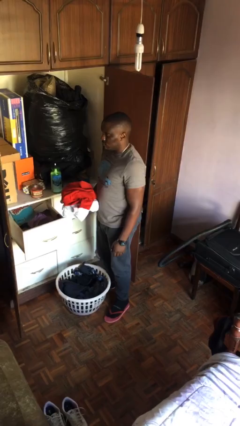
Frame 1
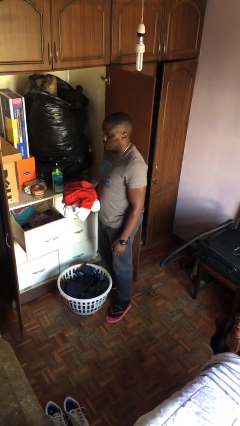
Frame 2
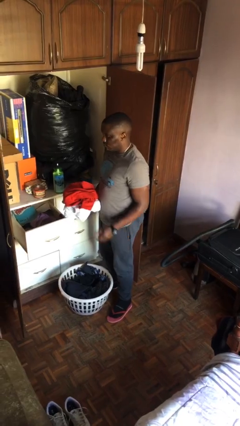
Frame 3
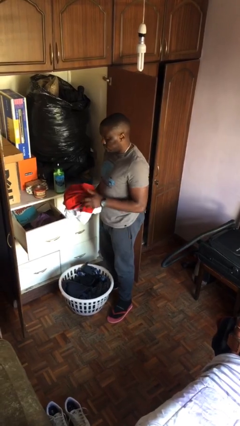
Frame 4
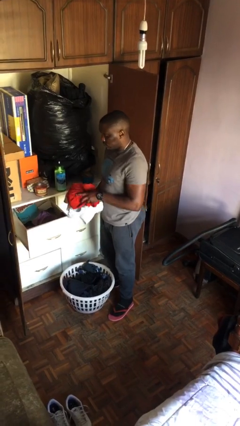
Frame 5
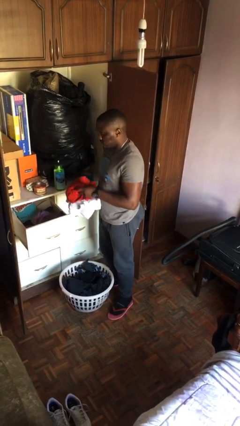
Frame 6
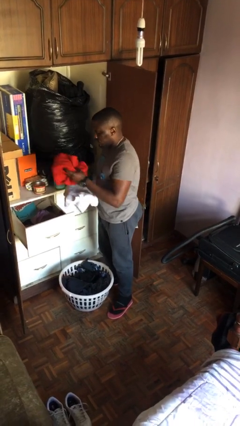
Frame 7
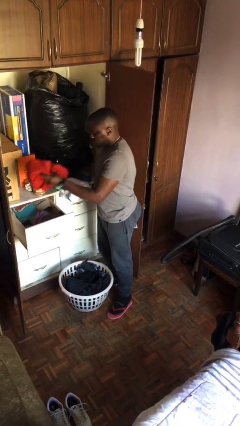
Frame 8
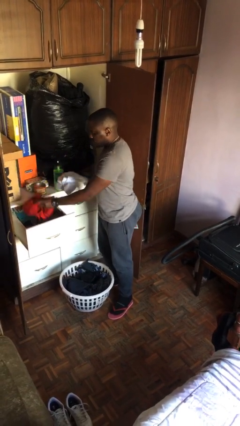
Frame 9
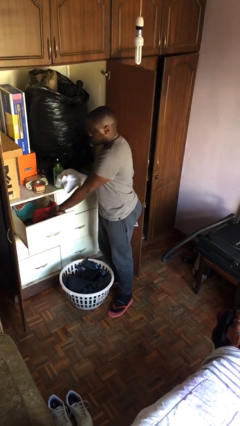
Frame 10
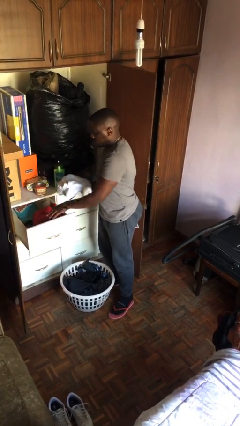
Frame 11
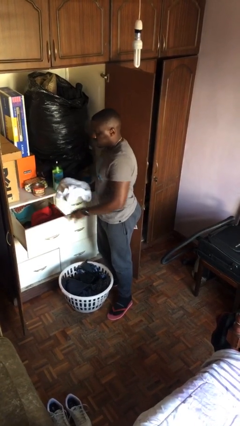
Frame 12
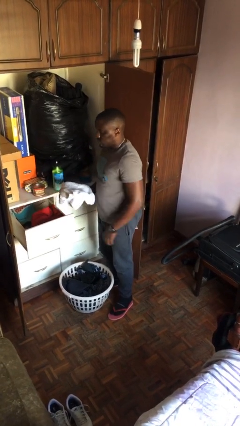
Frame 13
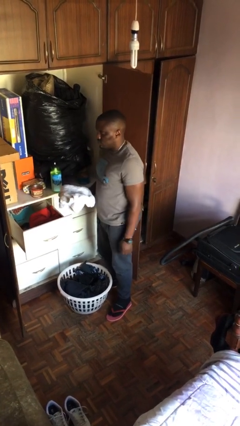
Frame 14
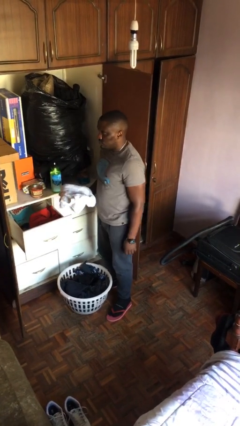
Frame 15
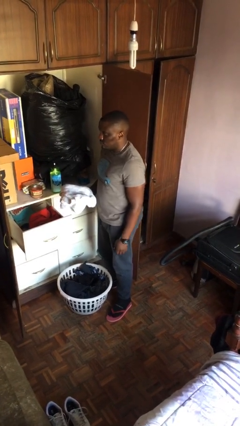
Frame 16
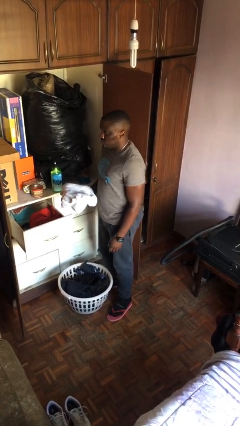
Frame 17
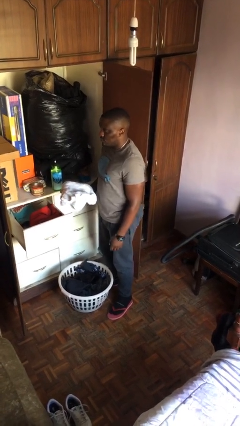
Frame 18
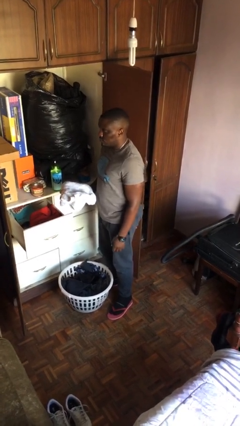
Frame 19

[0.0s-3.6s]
person puts clothes into dresser

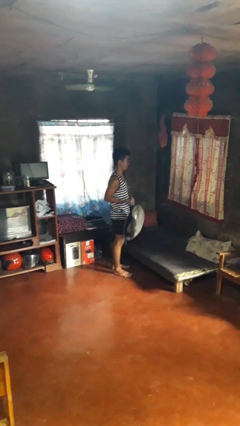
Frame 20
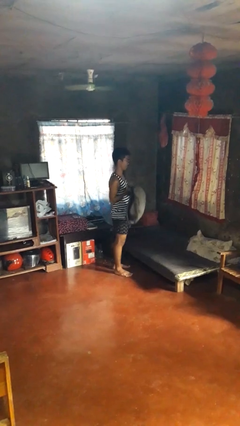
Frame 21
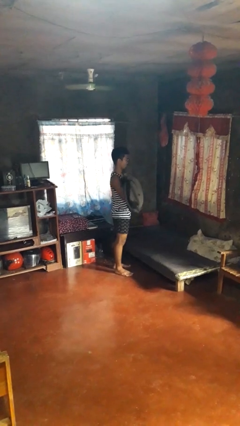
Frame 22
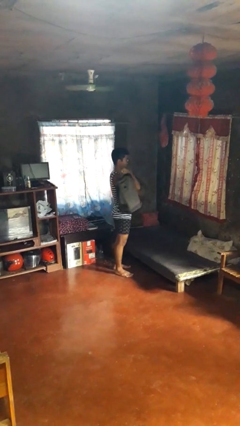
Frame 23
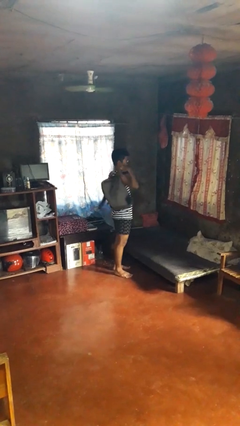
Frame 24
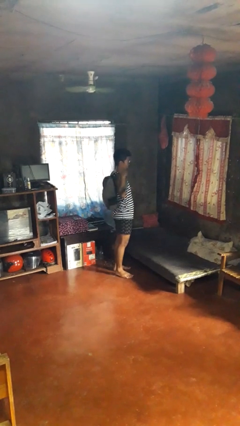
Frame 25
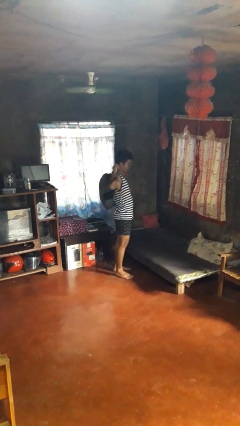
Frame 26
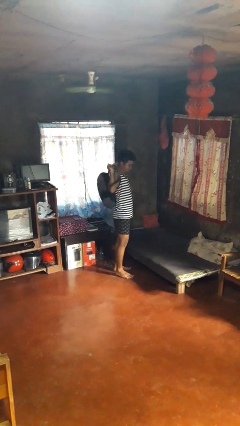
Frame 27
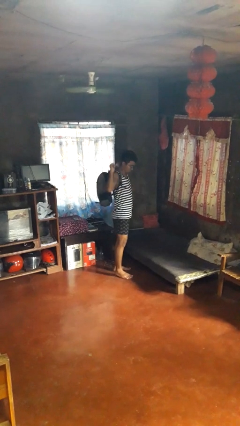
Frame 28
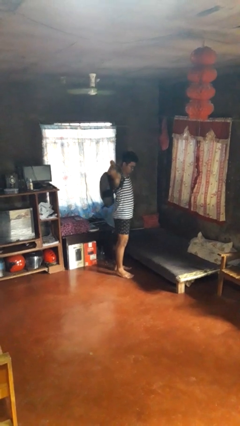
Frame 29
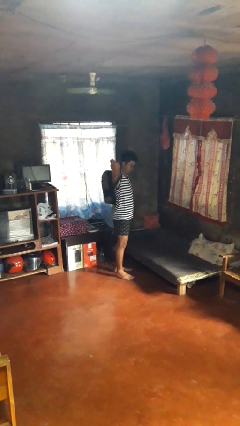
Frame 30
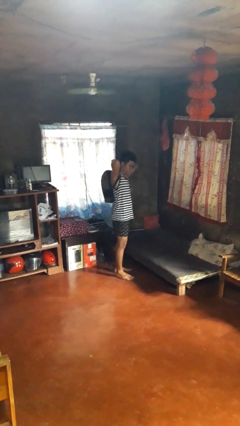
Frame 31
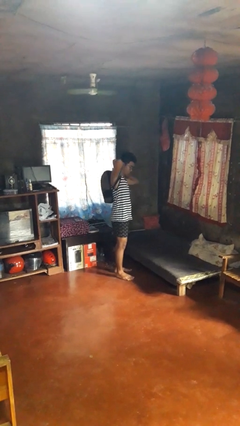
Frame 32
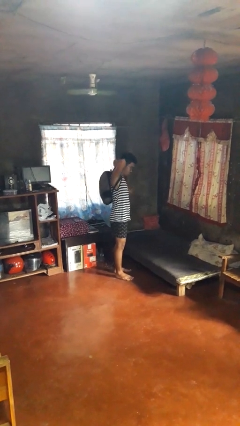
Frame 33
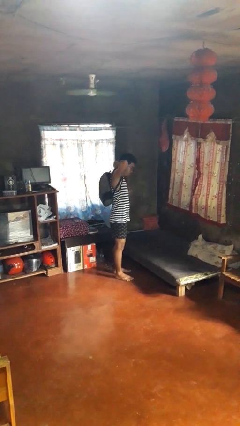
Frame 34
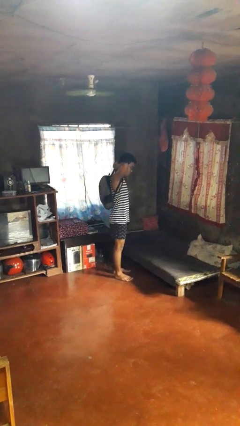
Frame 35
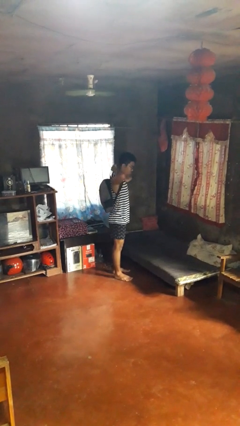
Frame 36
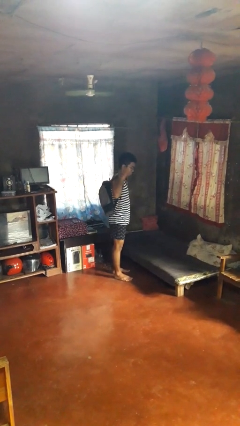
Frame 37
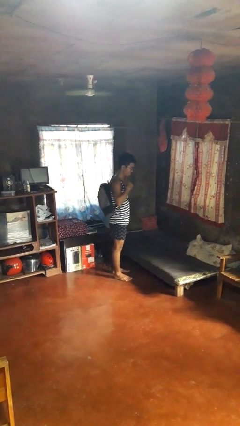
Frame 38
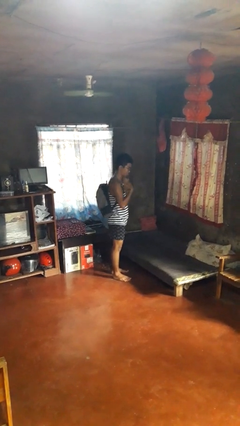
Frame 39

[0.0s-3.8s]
person puts on backpack

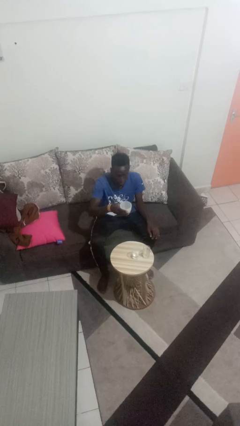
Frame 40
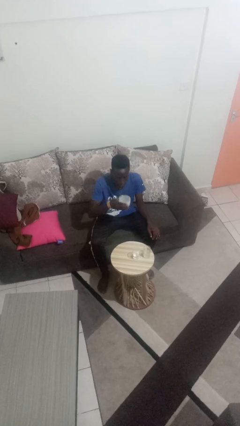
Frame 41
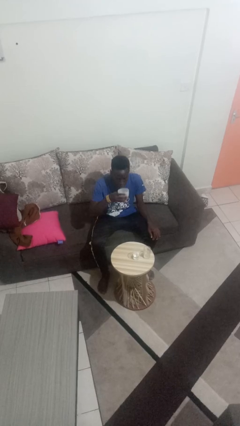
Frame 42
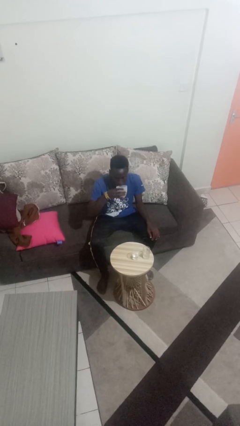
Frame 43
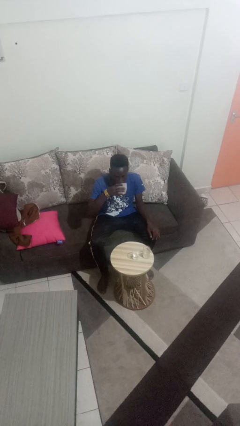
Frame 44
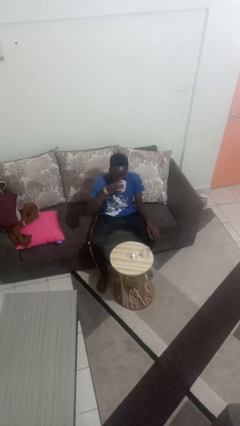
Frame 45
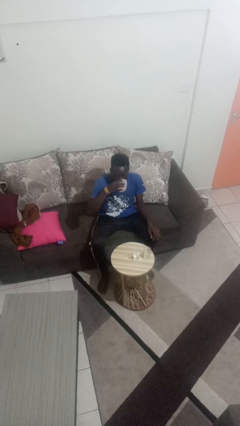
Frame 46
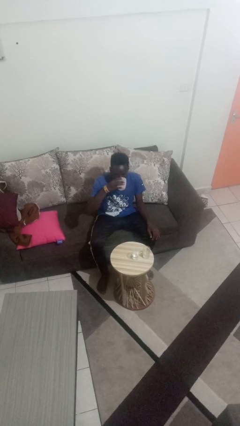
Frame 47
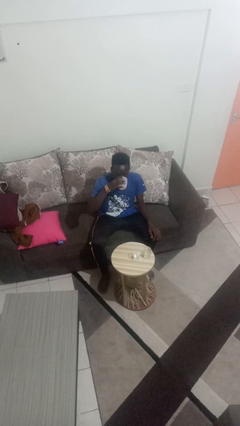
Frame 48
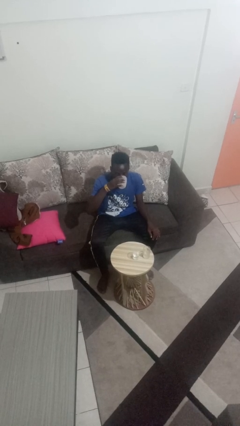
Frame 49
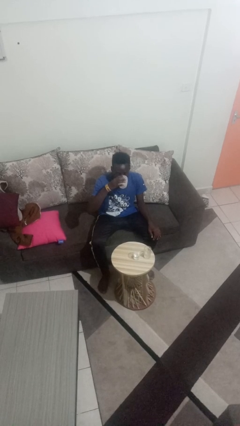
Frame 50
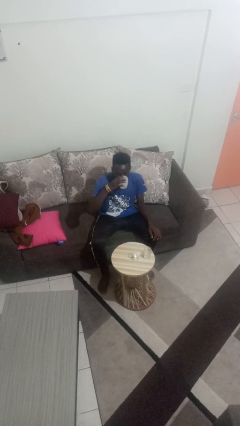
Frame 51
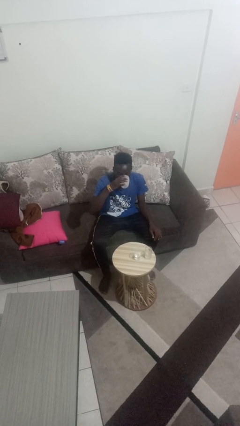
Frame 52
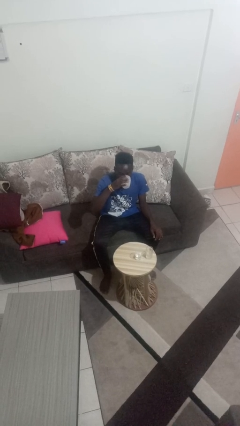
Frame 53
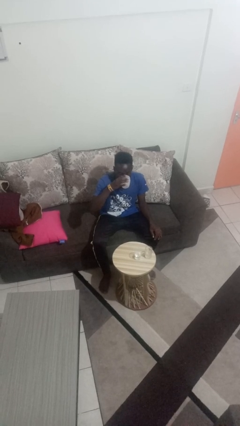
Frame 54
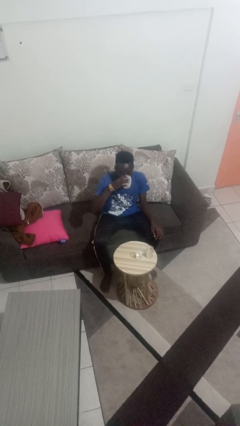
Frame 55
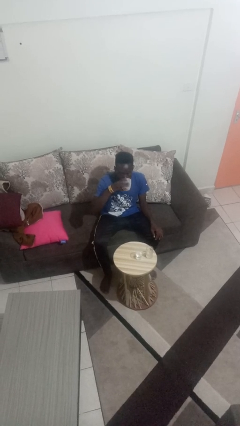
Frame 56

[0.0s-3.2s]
person drinks from shotglass

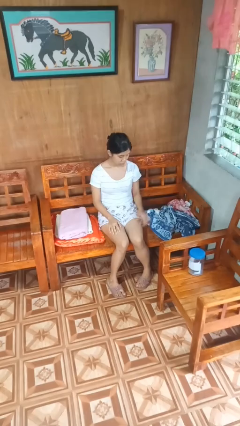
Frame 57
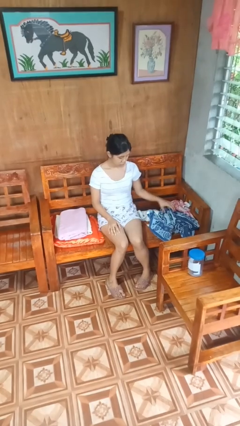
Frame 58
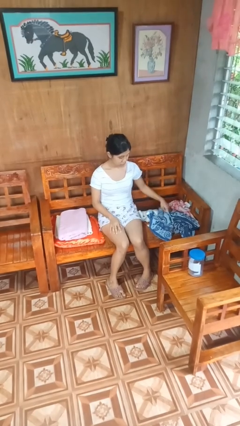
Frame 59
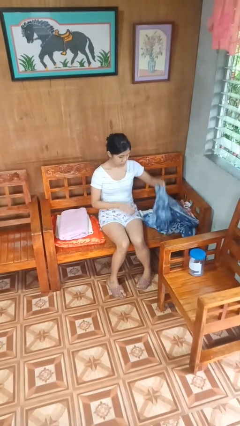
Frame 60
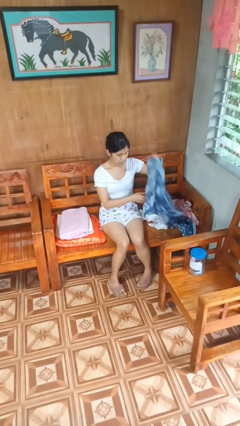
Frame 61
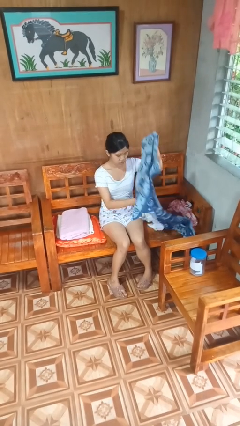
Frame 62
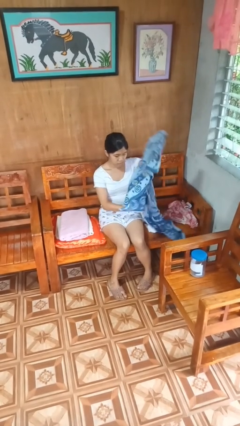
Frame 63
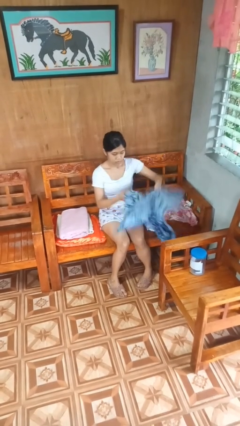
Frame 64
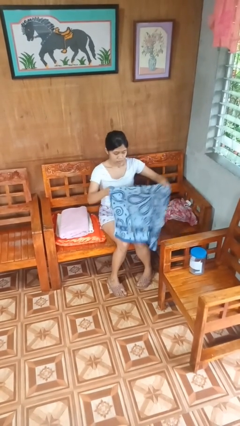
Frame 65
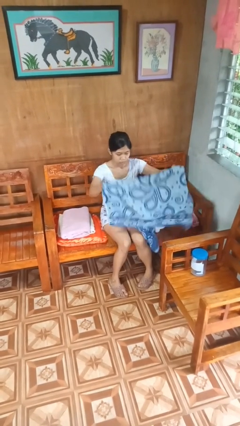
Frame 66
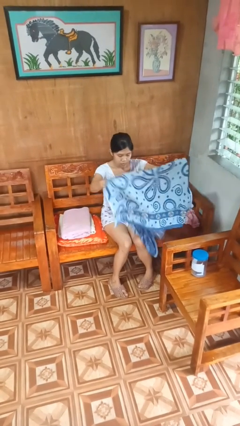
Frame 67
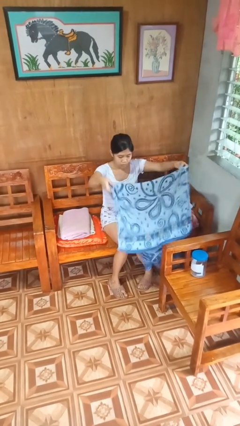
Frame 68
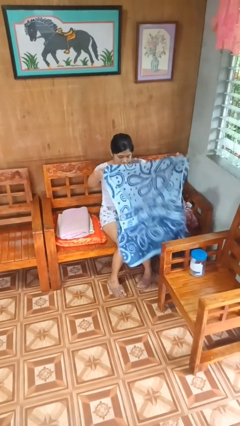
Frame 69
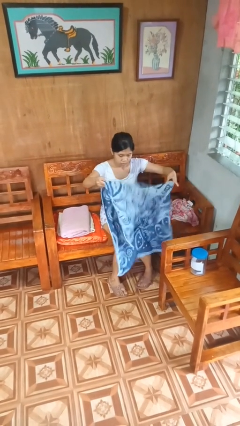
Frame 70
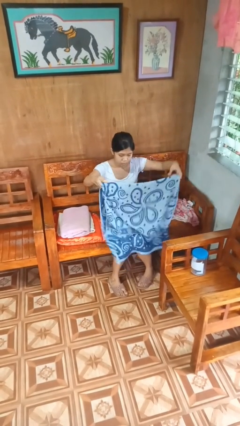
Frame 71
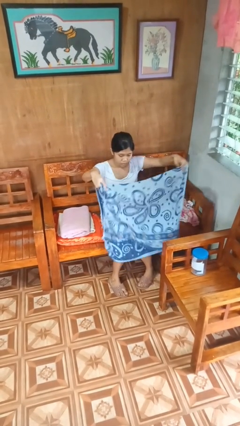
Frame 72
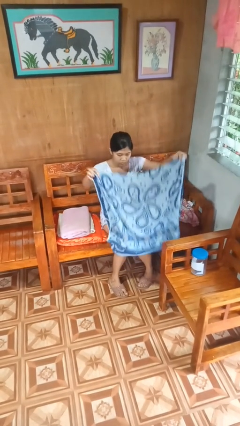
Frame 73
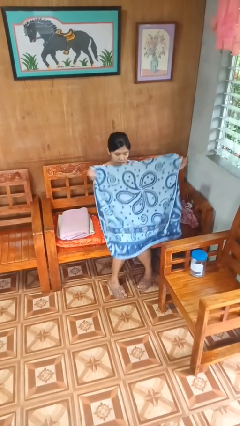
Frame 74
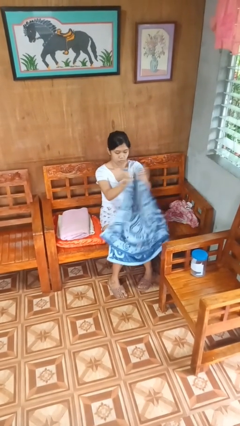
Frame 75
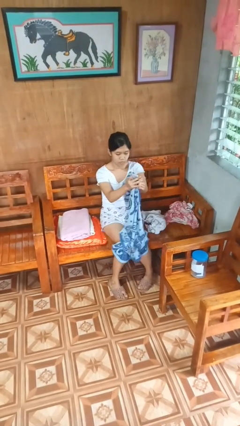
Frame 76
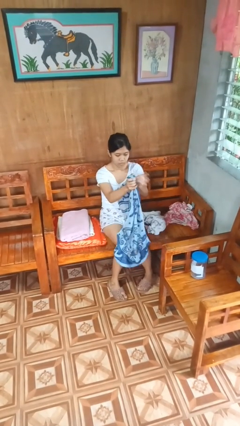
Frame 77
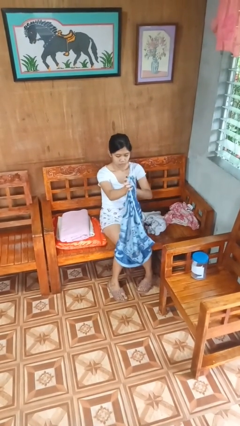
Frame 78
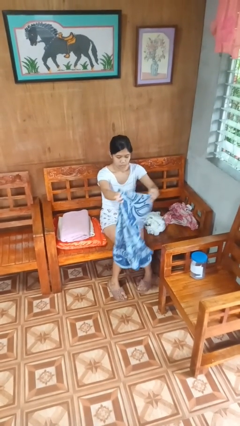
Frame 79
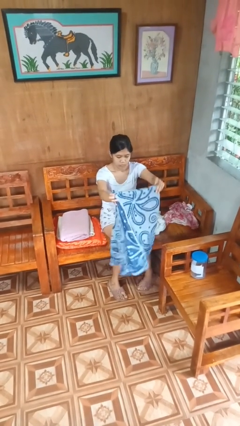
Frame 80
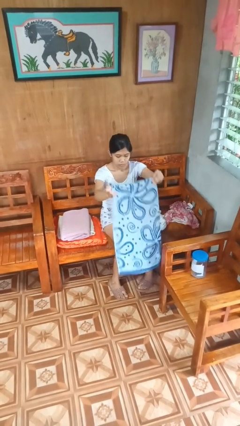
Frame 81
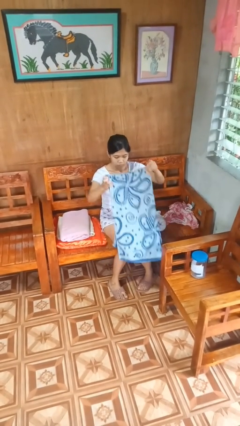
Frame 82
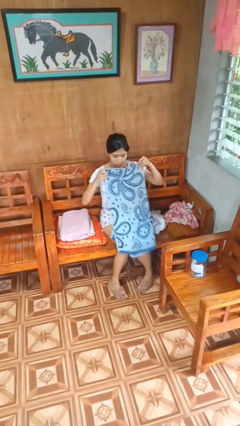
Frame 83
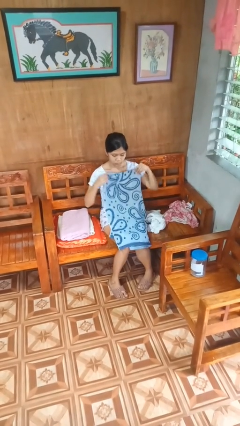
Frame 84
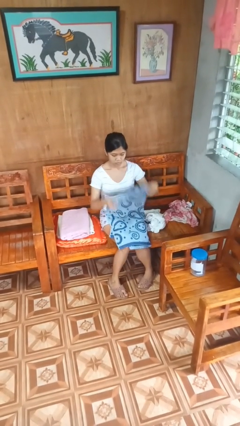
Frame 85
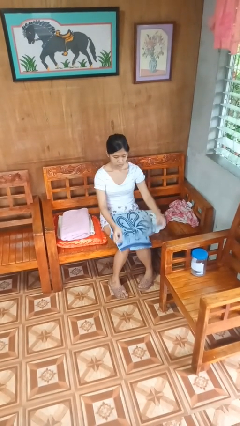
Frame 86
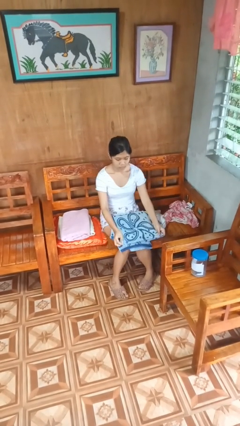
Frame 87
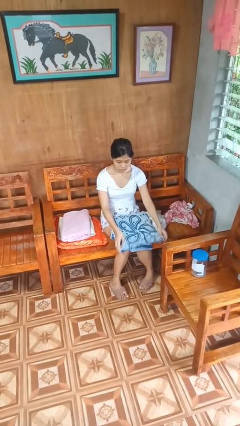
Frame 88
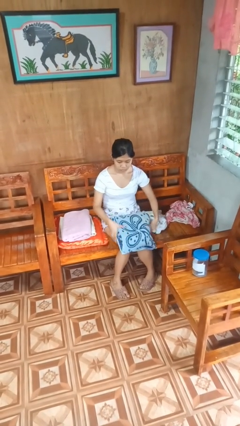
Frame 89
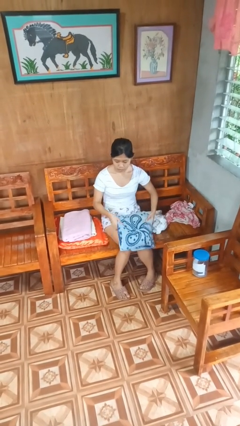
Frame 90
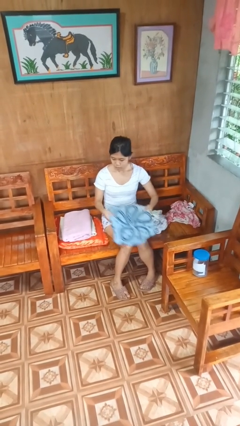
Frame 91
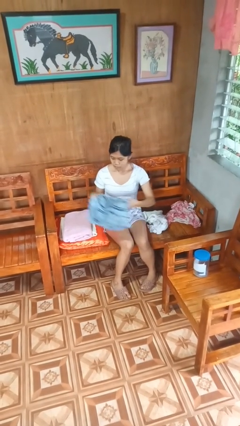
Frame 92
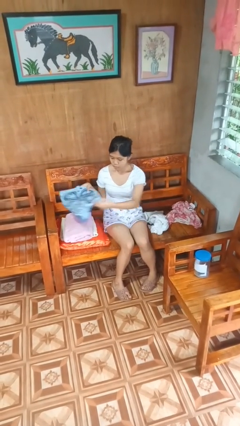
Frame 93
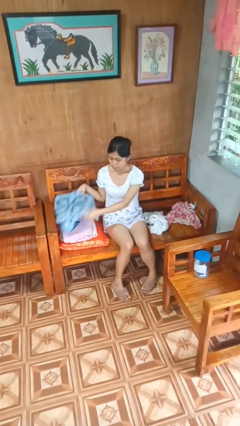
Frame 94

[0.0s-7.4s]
person folds towel
